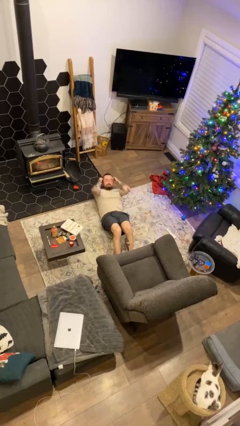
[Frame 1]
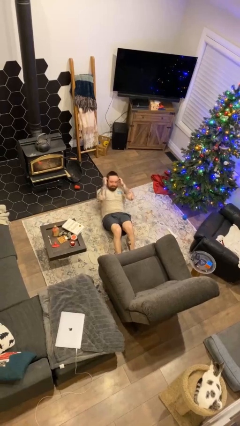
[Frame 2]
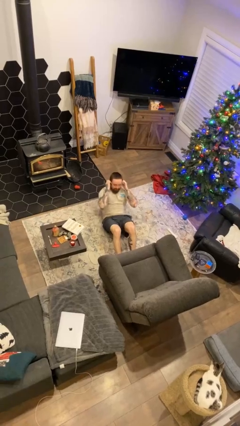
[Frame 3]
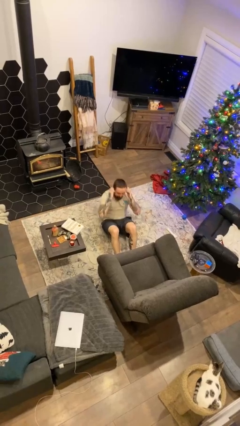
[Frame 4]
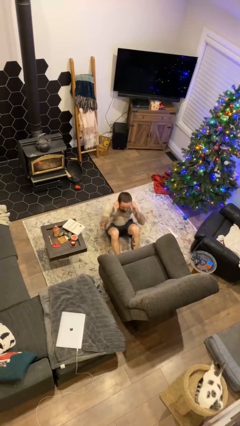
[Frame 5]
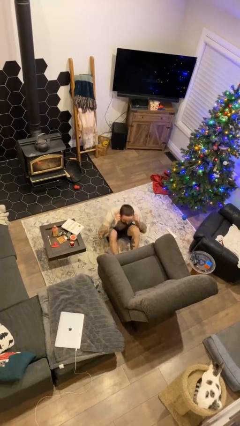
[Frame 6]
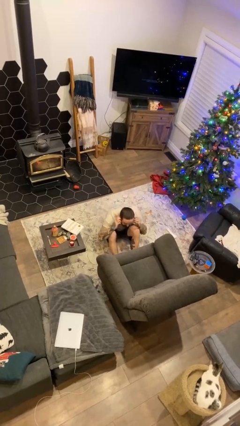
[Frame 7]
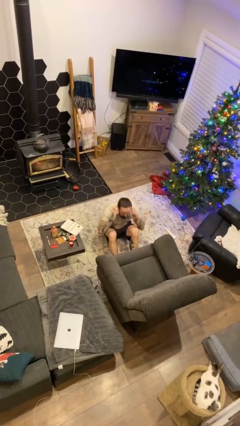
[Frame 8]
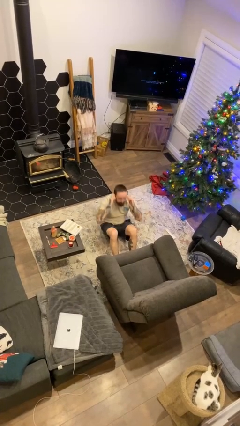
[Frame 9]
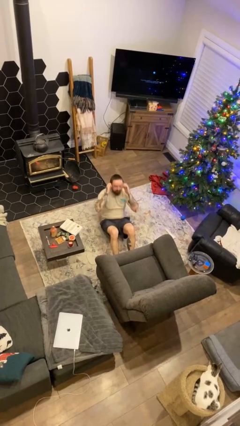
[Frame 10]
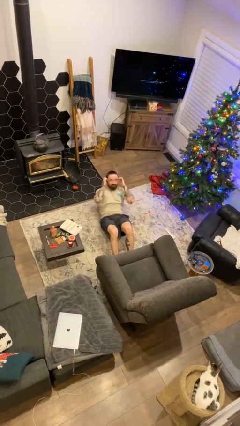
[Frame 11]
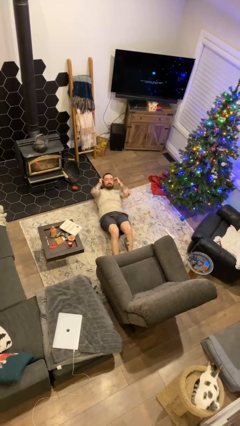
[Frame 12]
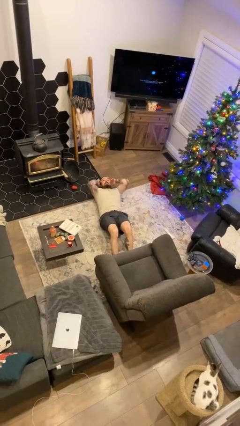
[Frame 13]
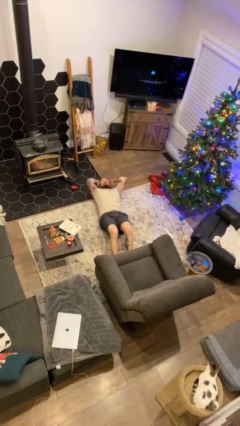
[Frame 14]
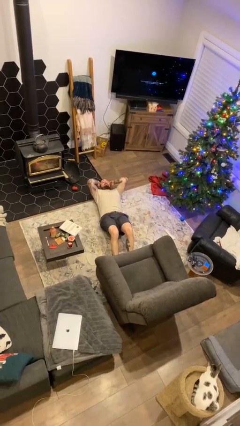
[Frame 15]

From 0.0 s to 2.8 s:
person exercises with situp

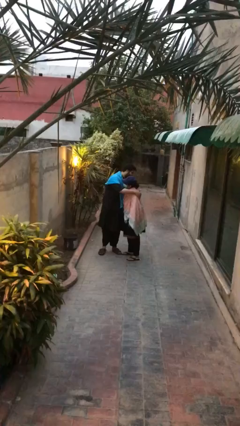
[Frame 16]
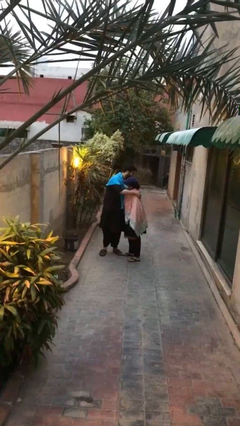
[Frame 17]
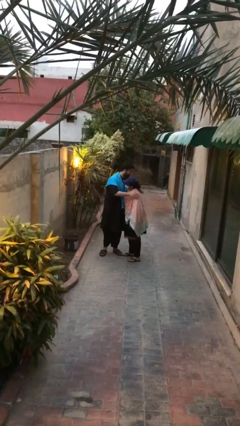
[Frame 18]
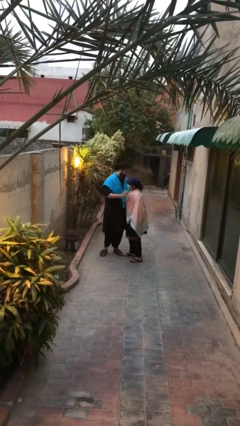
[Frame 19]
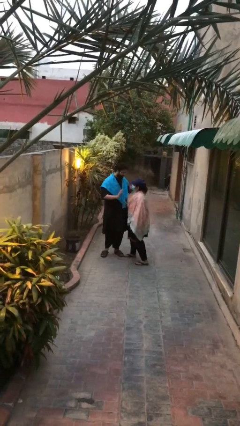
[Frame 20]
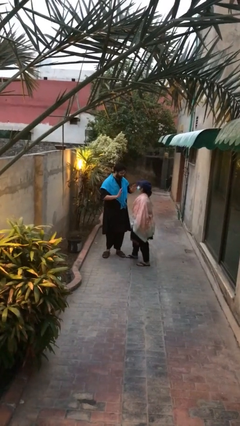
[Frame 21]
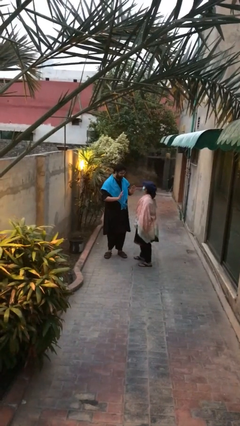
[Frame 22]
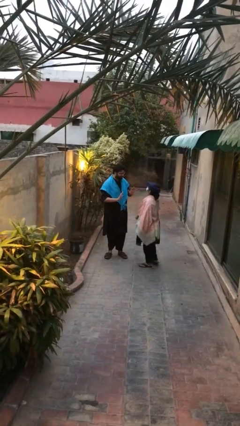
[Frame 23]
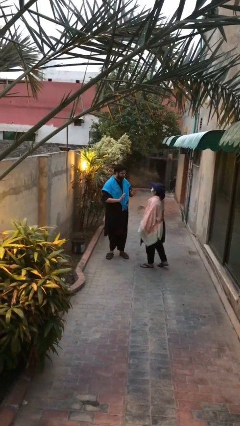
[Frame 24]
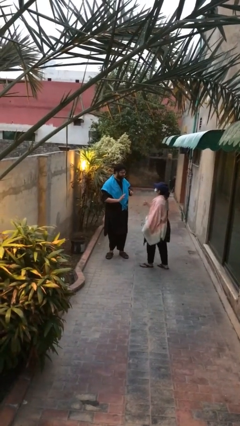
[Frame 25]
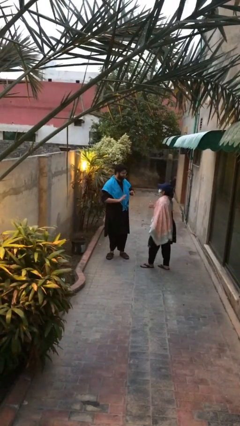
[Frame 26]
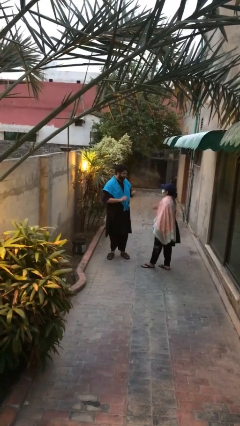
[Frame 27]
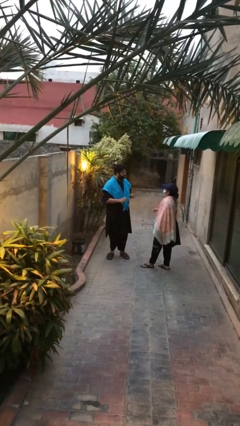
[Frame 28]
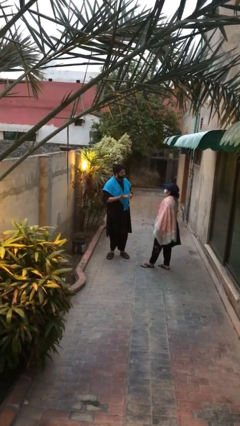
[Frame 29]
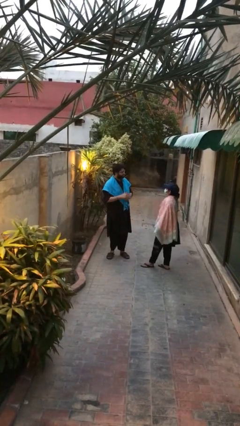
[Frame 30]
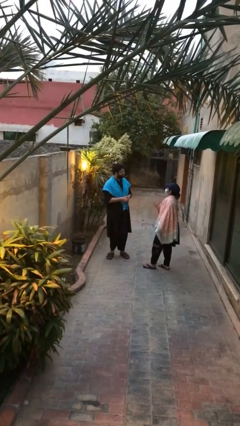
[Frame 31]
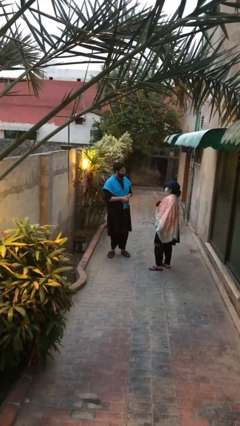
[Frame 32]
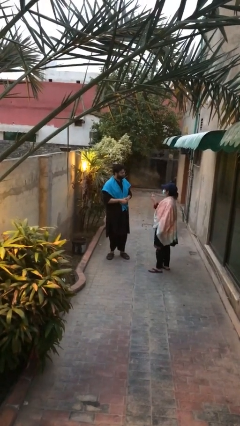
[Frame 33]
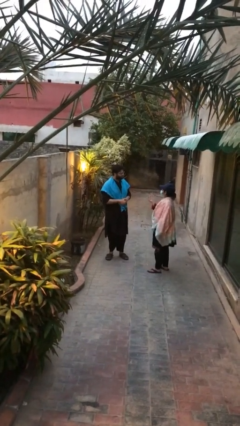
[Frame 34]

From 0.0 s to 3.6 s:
person talks to person

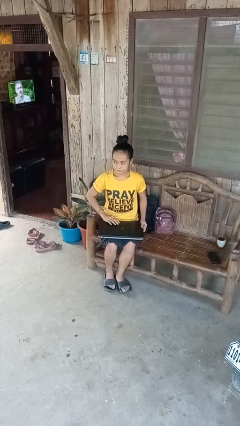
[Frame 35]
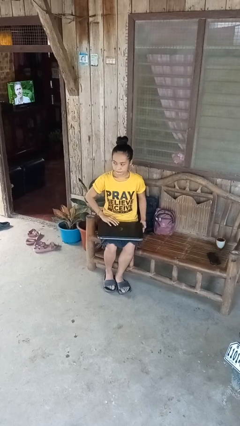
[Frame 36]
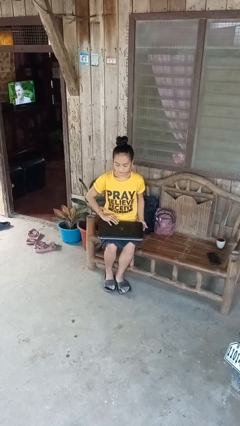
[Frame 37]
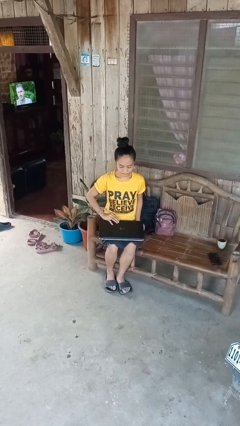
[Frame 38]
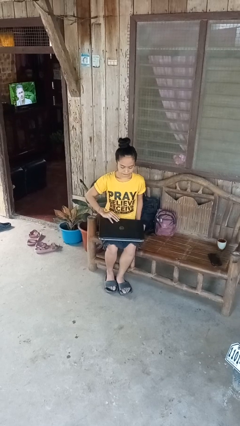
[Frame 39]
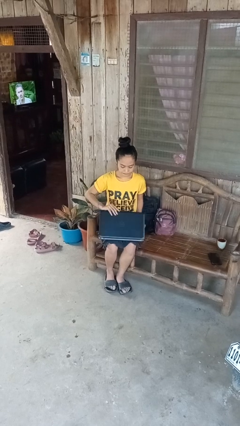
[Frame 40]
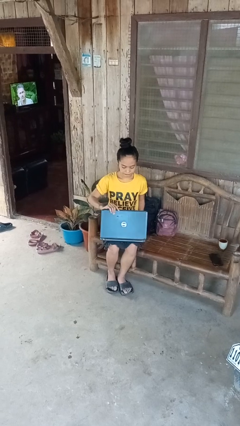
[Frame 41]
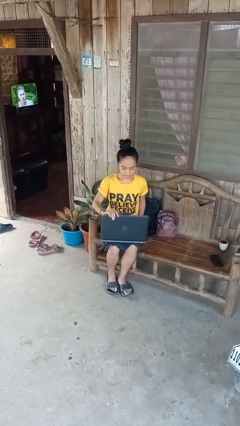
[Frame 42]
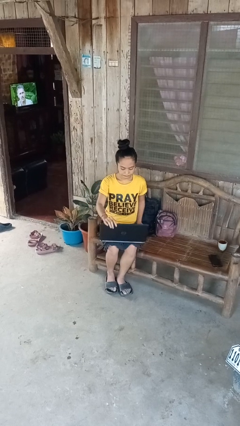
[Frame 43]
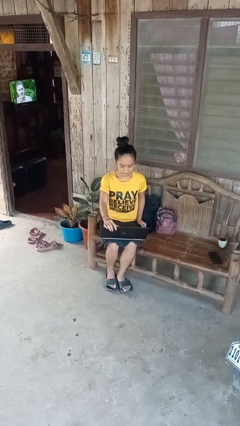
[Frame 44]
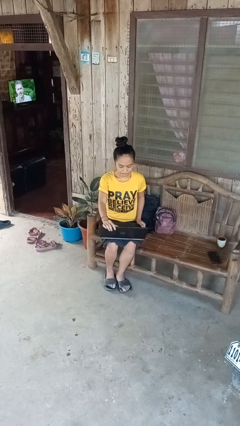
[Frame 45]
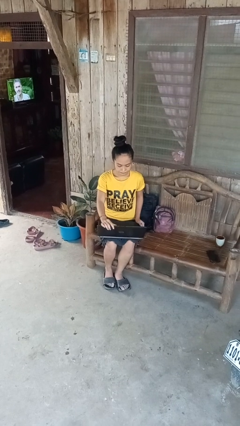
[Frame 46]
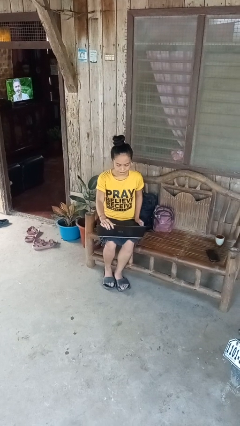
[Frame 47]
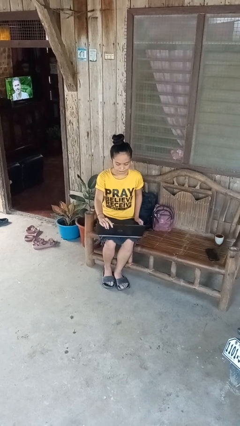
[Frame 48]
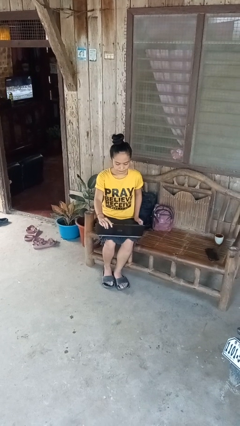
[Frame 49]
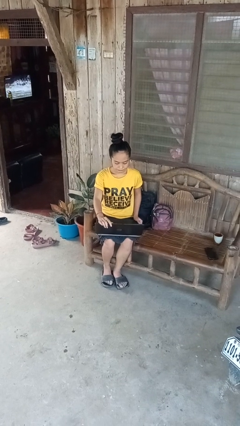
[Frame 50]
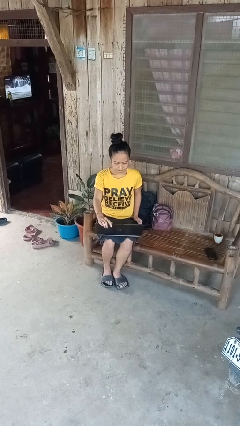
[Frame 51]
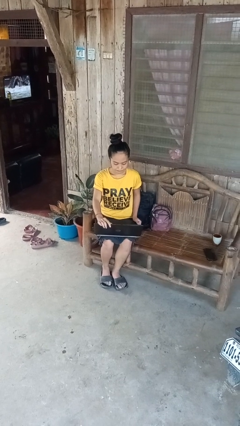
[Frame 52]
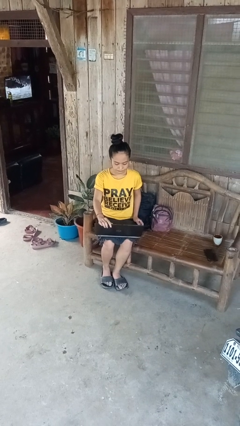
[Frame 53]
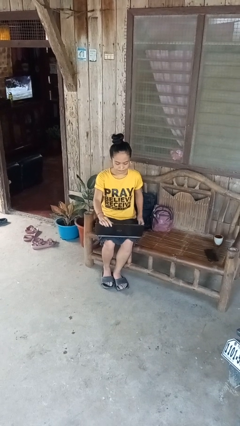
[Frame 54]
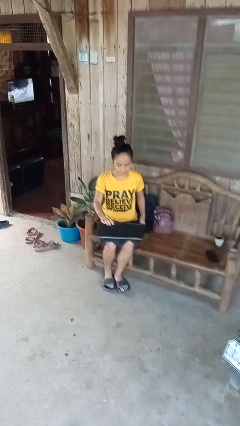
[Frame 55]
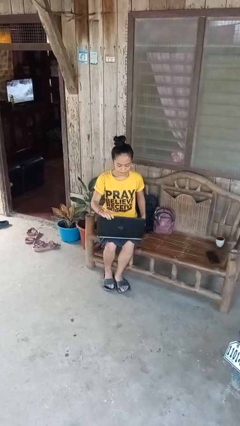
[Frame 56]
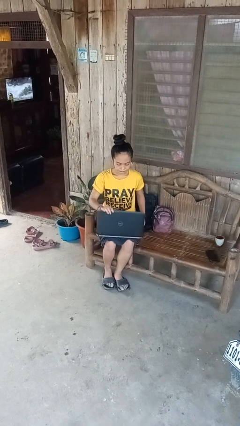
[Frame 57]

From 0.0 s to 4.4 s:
person opens laptop

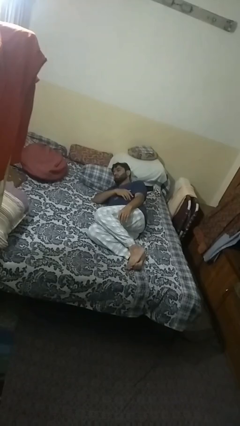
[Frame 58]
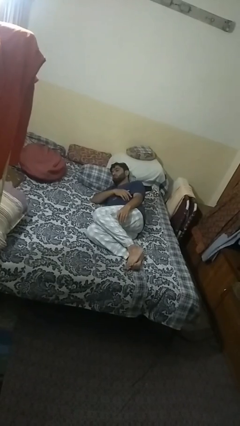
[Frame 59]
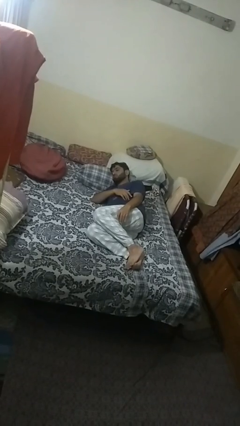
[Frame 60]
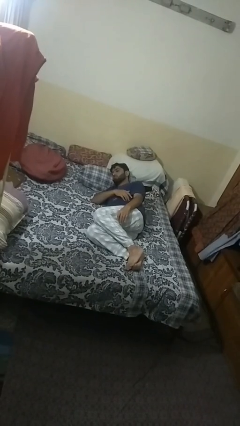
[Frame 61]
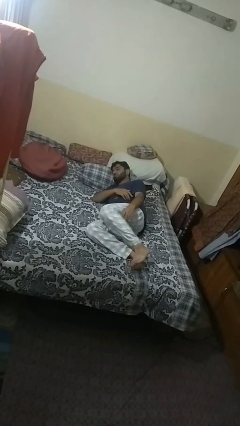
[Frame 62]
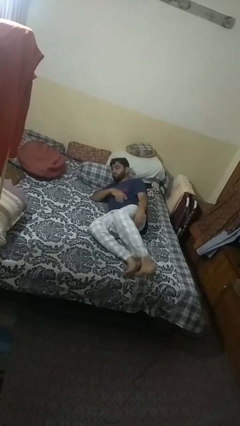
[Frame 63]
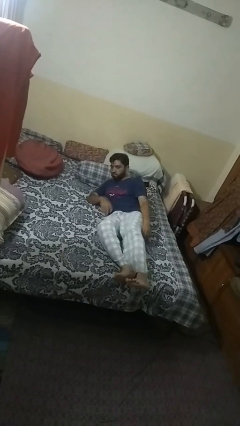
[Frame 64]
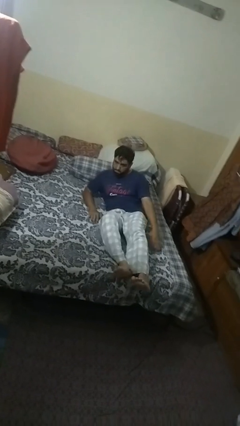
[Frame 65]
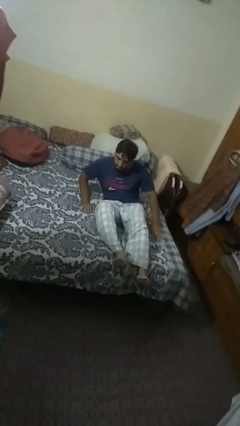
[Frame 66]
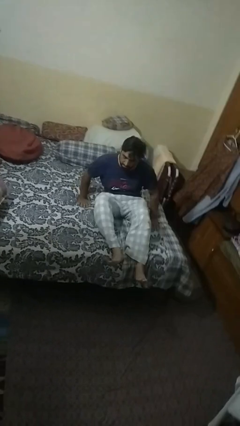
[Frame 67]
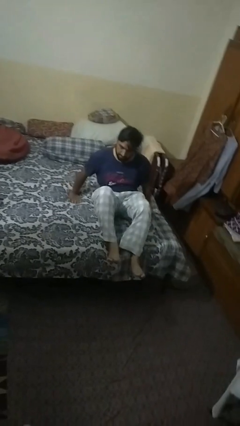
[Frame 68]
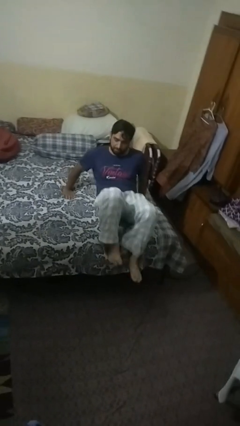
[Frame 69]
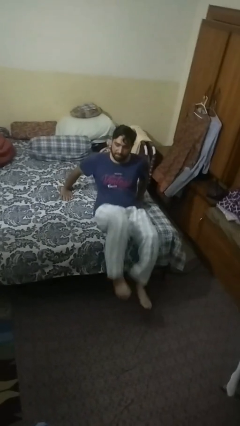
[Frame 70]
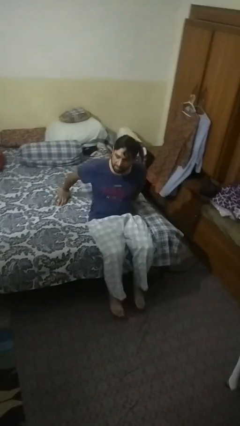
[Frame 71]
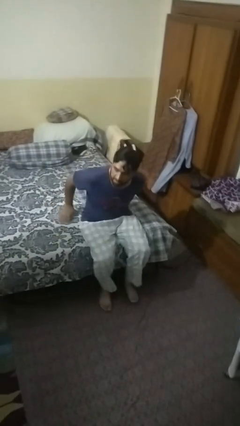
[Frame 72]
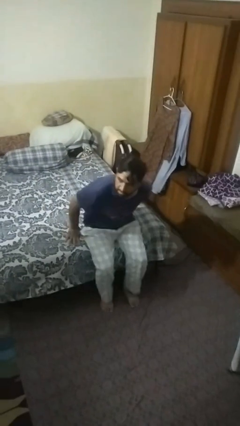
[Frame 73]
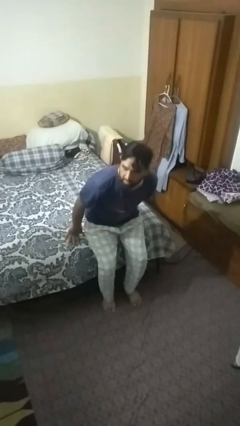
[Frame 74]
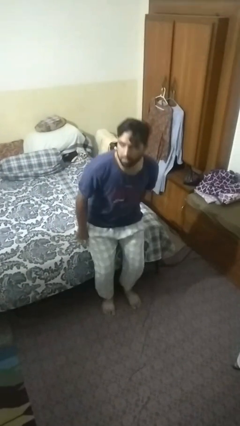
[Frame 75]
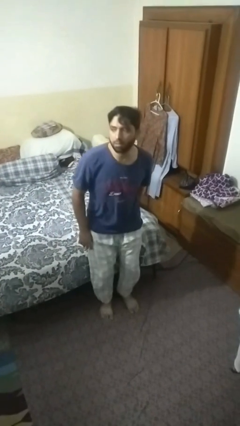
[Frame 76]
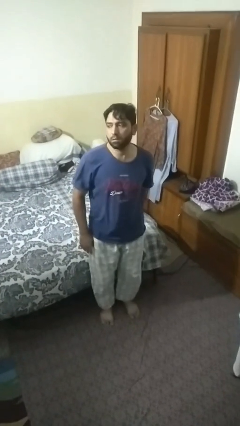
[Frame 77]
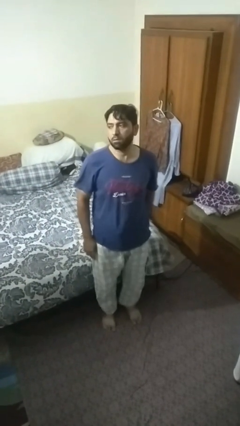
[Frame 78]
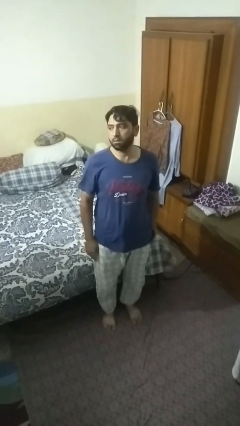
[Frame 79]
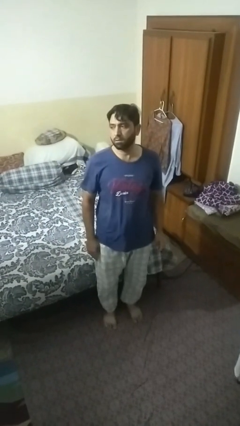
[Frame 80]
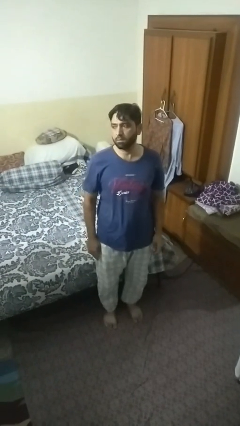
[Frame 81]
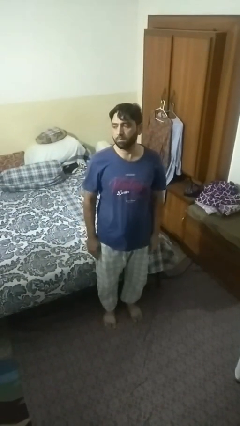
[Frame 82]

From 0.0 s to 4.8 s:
person stands up

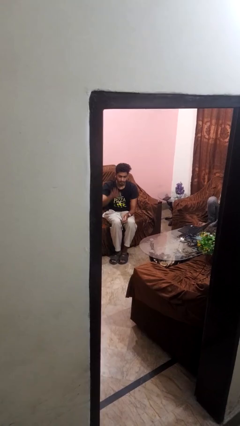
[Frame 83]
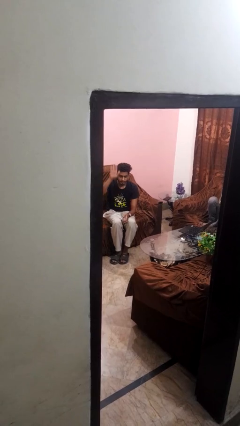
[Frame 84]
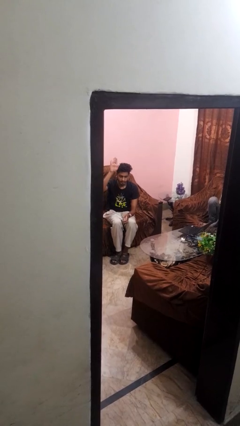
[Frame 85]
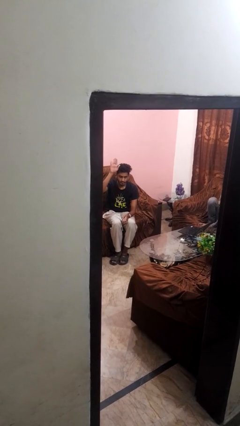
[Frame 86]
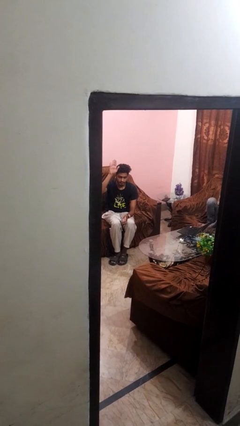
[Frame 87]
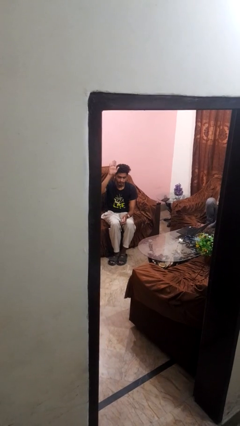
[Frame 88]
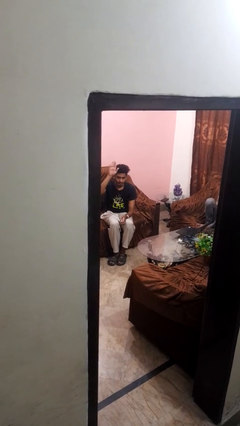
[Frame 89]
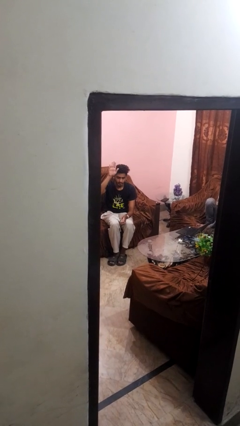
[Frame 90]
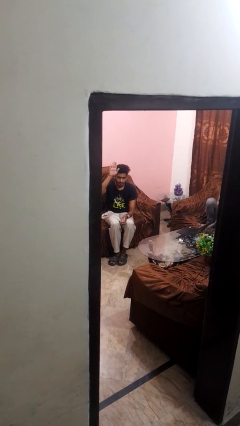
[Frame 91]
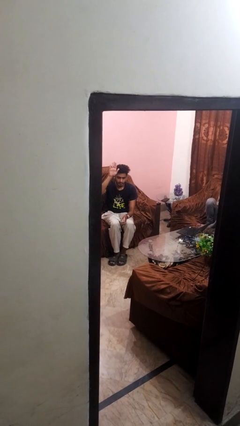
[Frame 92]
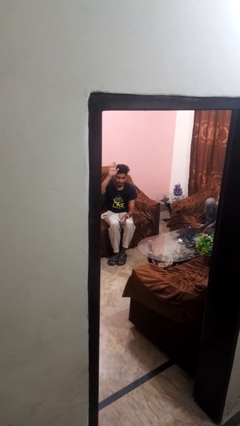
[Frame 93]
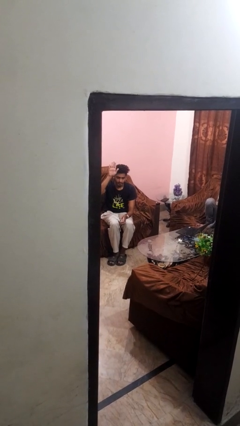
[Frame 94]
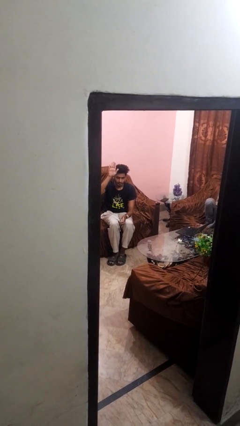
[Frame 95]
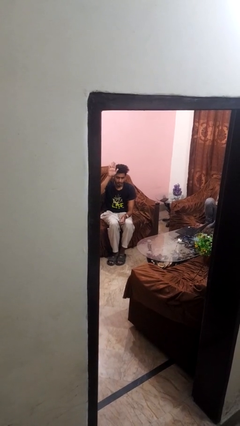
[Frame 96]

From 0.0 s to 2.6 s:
person gestures raise hand
